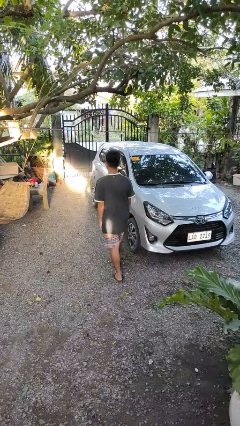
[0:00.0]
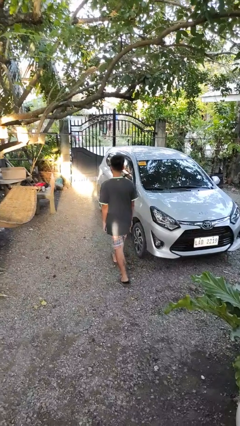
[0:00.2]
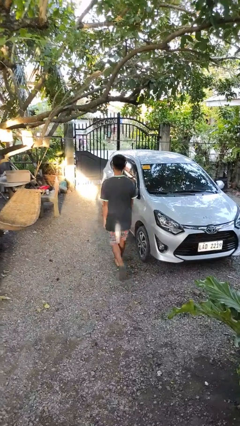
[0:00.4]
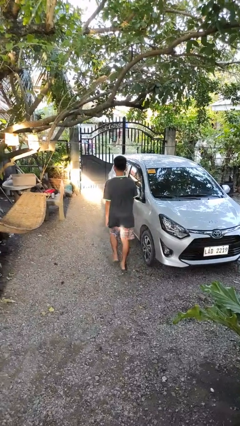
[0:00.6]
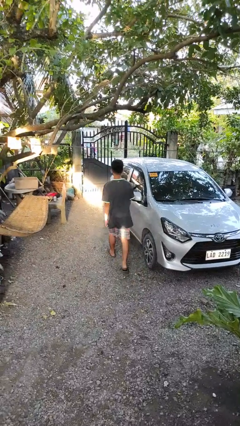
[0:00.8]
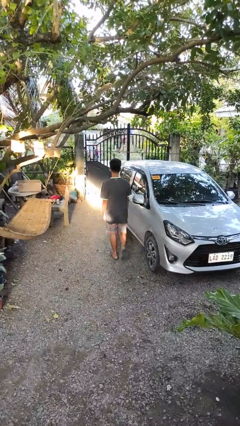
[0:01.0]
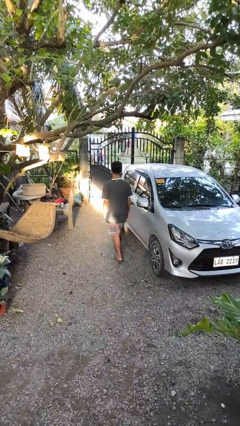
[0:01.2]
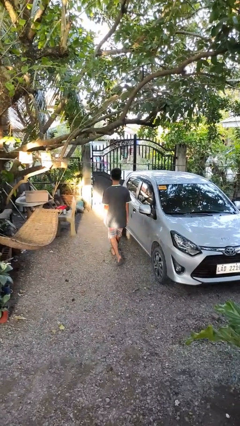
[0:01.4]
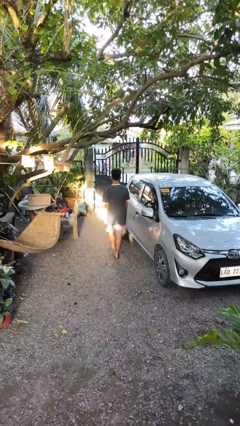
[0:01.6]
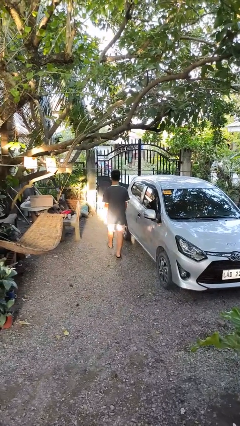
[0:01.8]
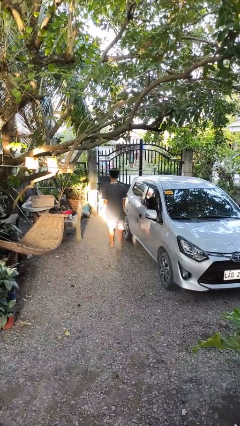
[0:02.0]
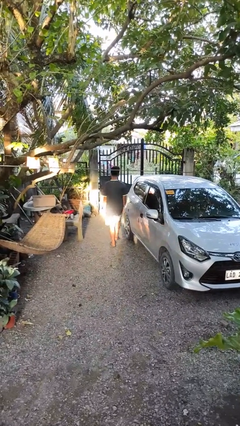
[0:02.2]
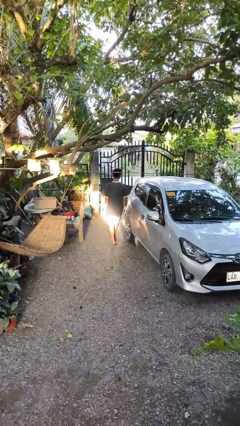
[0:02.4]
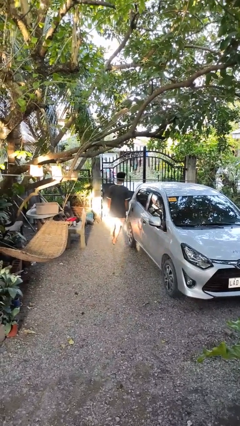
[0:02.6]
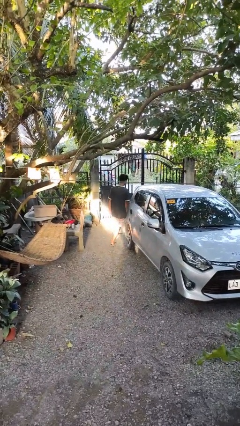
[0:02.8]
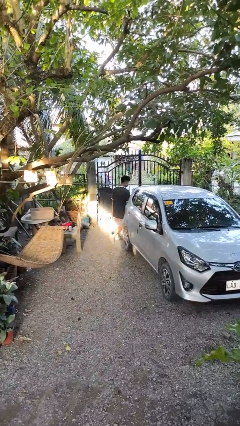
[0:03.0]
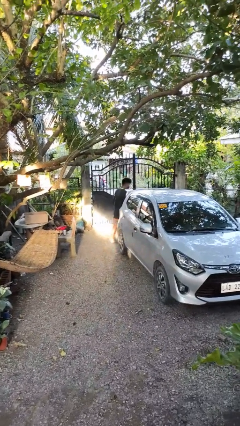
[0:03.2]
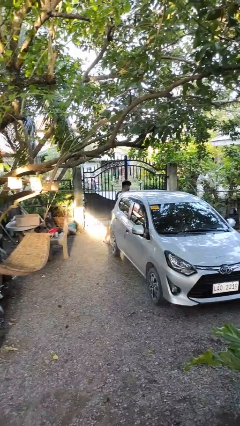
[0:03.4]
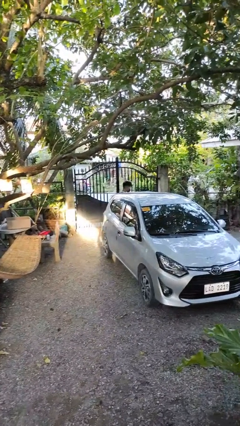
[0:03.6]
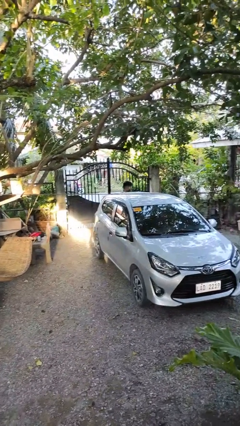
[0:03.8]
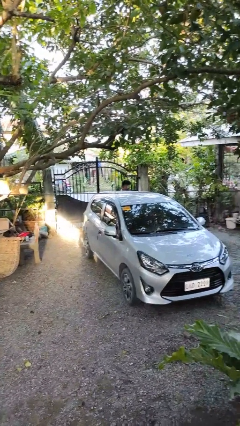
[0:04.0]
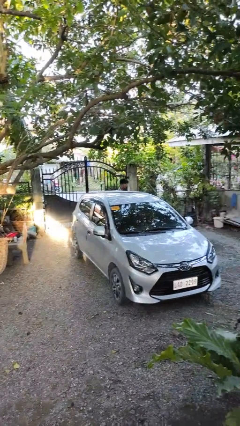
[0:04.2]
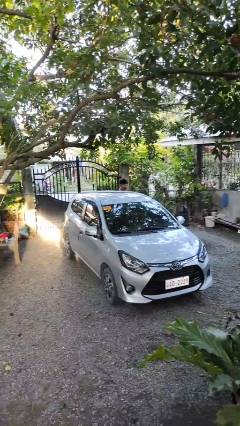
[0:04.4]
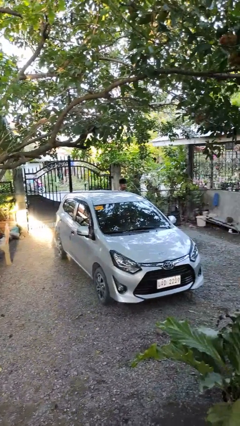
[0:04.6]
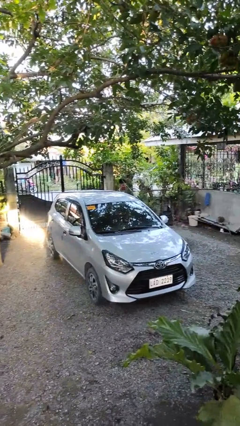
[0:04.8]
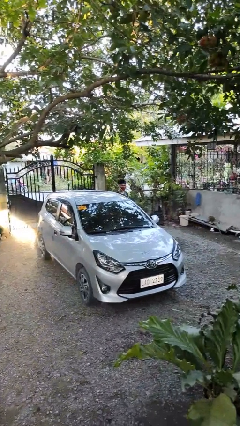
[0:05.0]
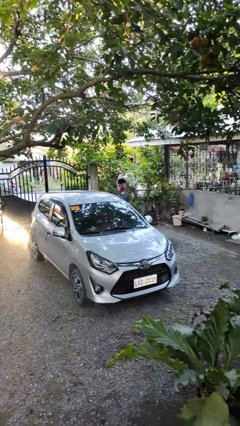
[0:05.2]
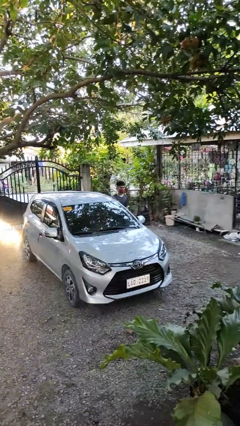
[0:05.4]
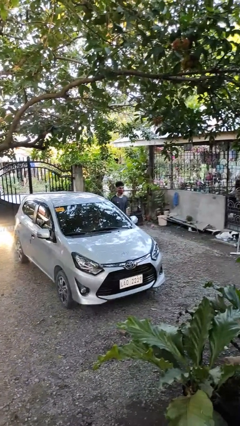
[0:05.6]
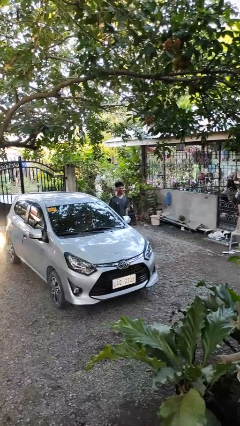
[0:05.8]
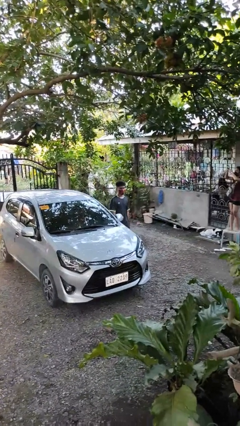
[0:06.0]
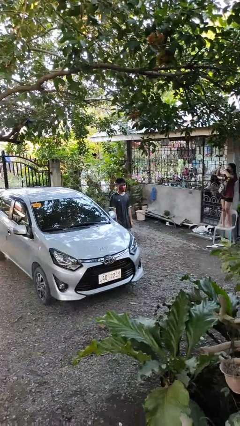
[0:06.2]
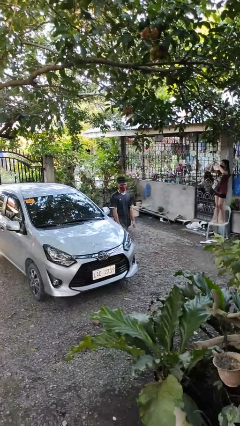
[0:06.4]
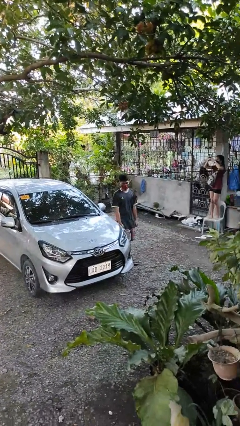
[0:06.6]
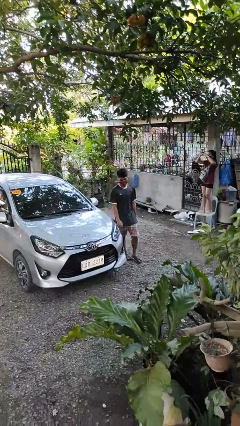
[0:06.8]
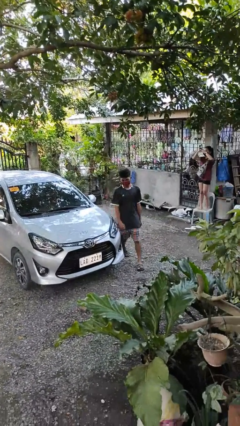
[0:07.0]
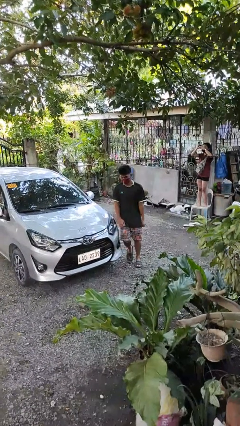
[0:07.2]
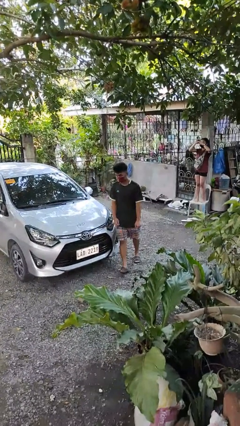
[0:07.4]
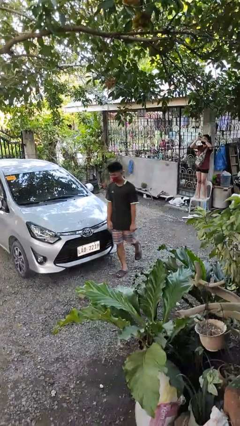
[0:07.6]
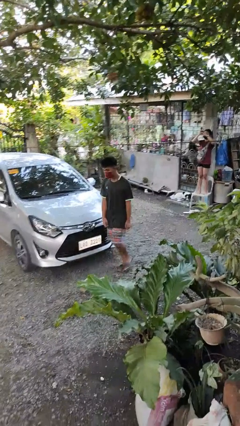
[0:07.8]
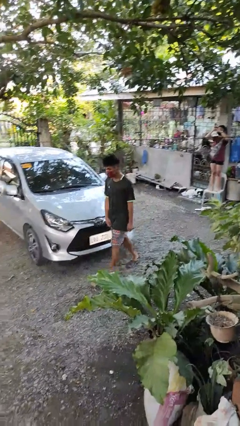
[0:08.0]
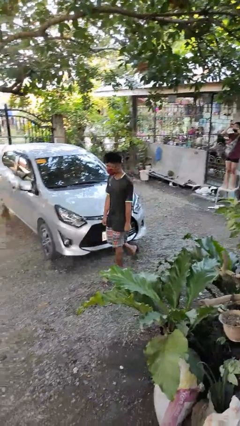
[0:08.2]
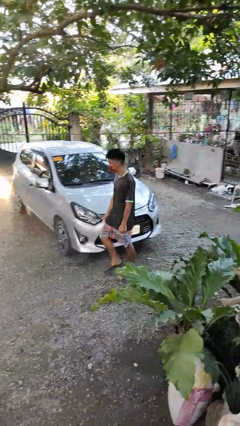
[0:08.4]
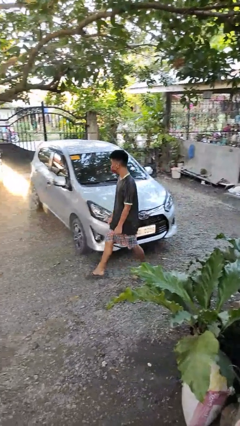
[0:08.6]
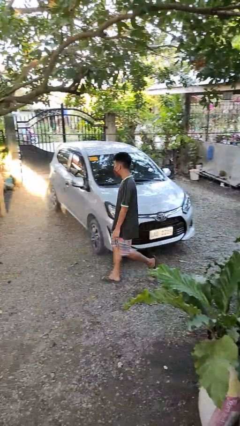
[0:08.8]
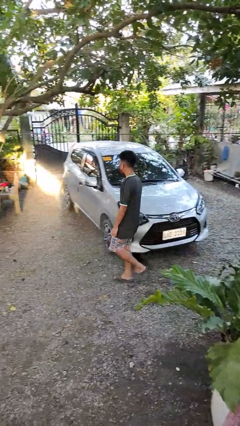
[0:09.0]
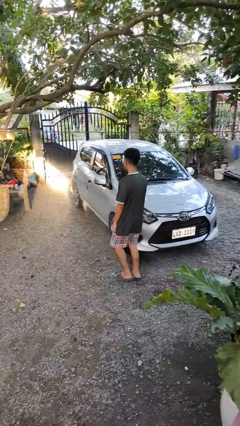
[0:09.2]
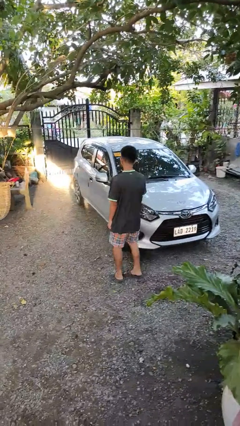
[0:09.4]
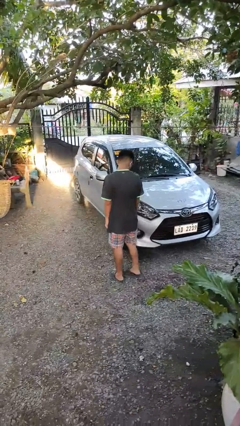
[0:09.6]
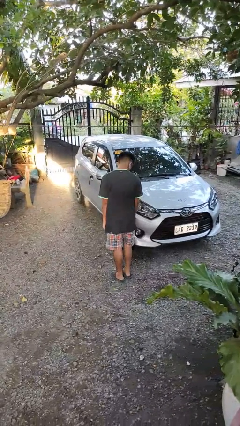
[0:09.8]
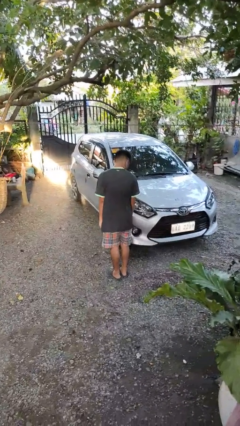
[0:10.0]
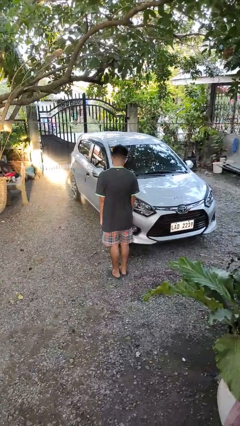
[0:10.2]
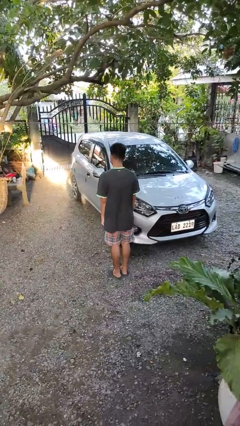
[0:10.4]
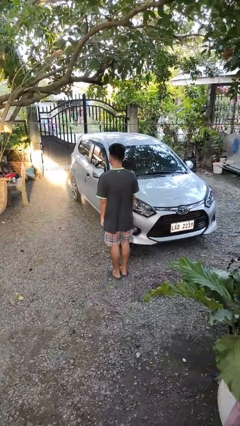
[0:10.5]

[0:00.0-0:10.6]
person walks around car

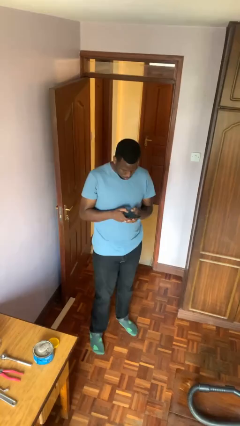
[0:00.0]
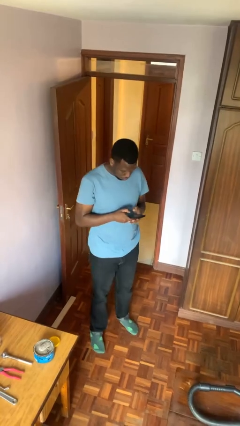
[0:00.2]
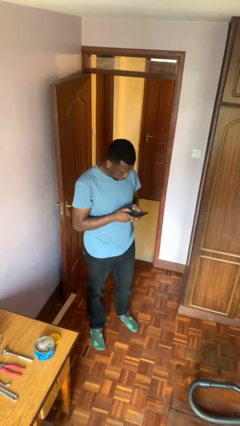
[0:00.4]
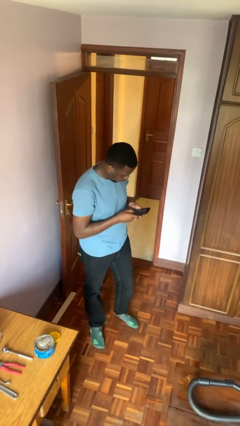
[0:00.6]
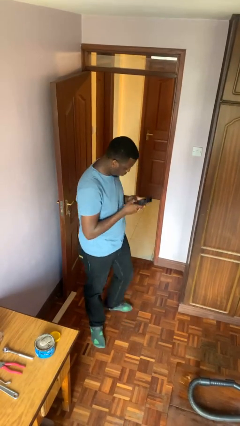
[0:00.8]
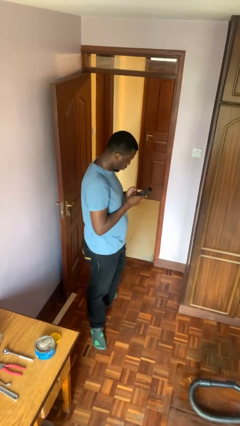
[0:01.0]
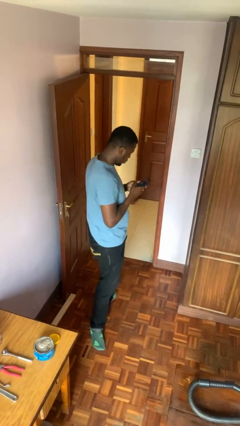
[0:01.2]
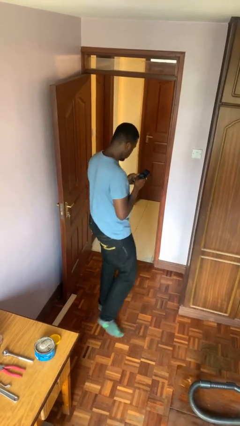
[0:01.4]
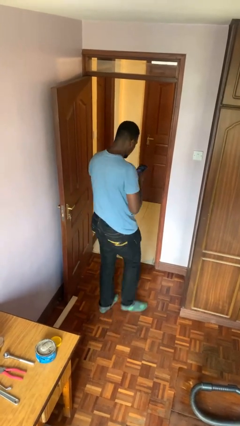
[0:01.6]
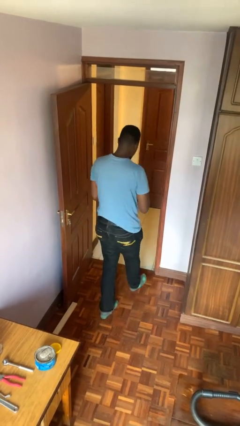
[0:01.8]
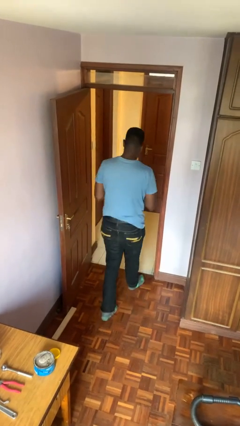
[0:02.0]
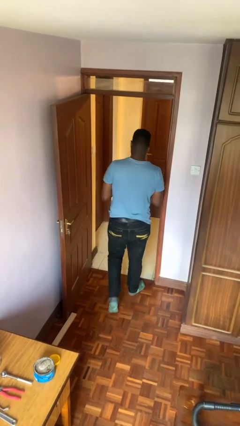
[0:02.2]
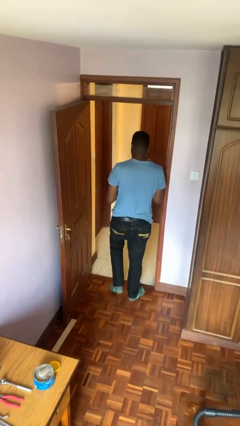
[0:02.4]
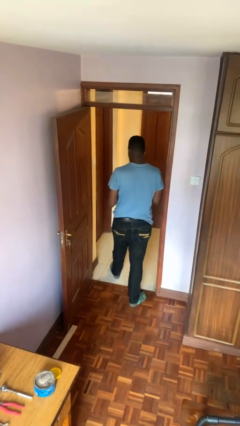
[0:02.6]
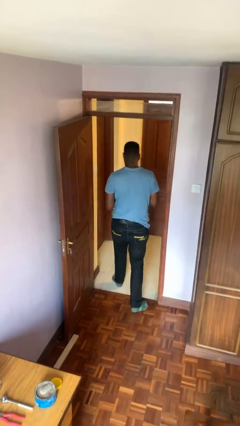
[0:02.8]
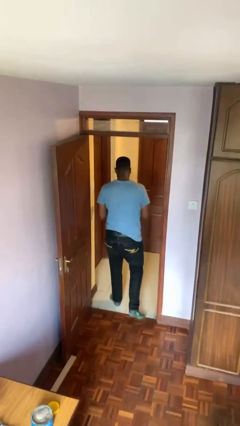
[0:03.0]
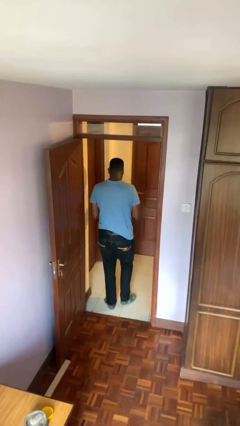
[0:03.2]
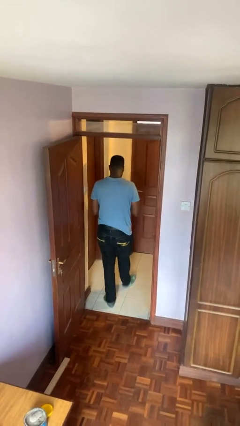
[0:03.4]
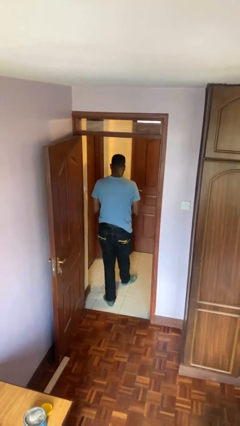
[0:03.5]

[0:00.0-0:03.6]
person exits scene through structure

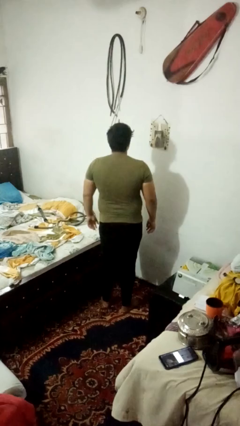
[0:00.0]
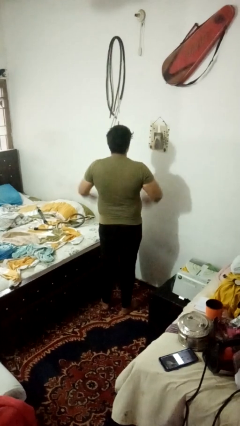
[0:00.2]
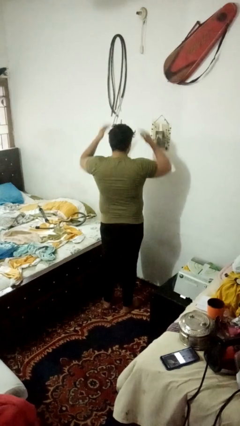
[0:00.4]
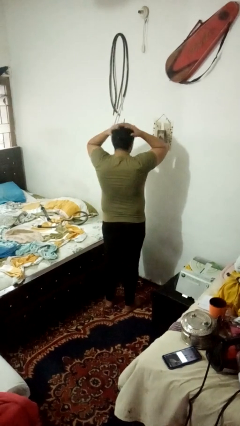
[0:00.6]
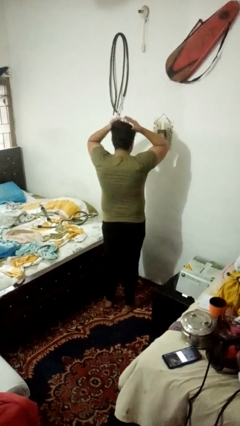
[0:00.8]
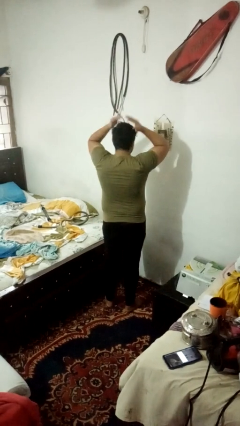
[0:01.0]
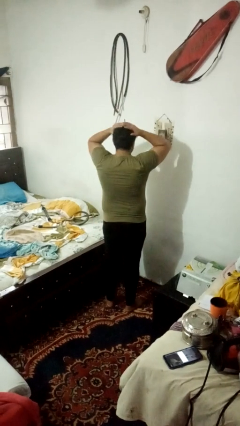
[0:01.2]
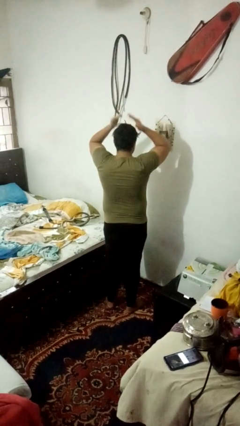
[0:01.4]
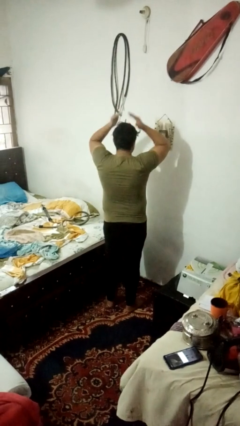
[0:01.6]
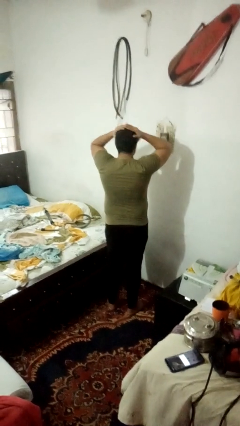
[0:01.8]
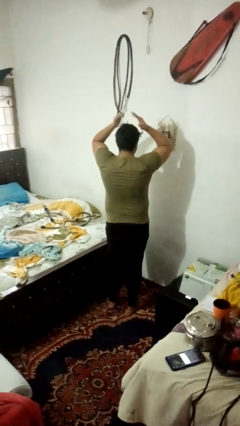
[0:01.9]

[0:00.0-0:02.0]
person pats head

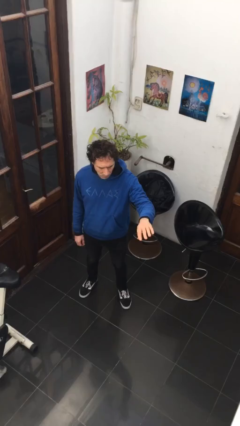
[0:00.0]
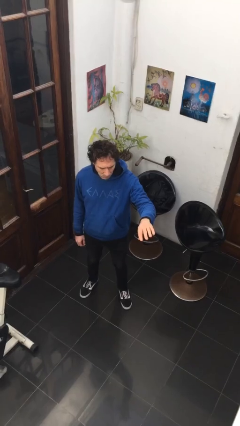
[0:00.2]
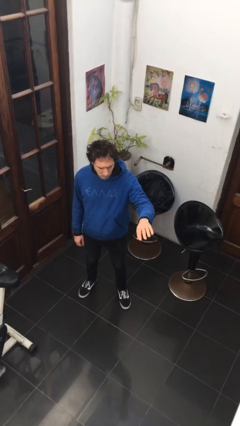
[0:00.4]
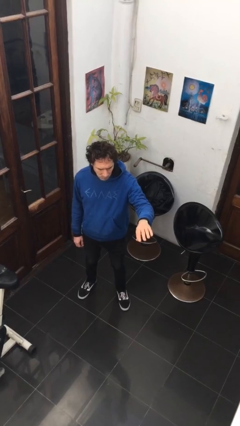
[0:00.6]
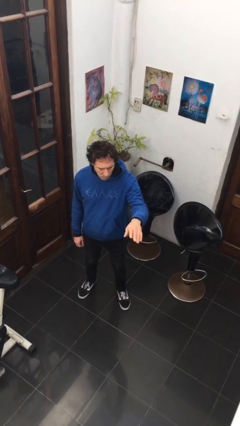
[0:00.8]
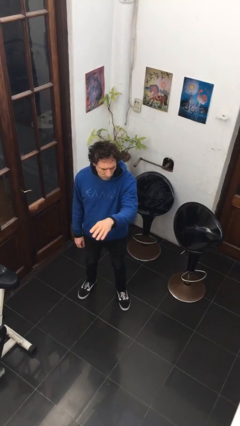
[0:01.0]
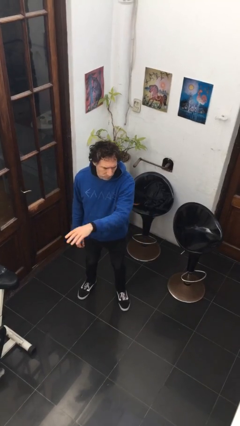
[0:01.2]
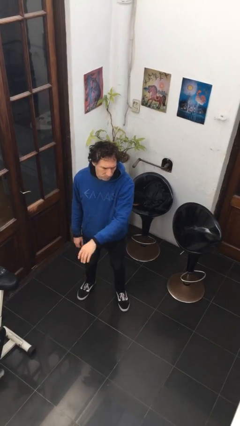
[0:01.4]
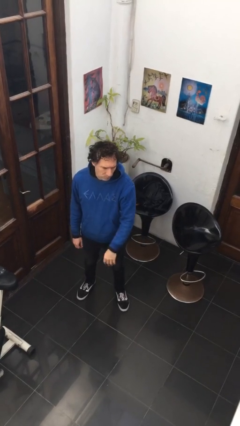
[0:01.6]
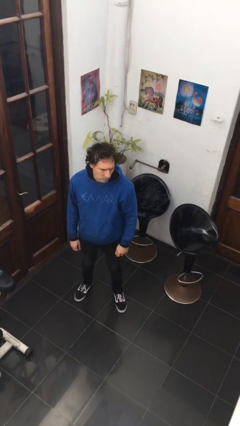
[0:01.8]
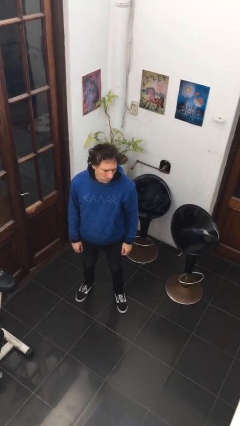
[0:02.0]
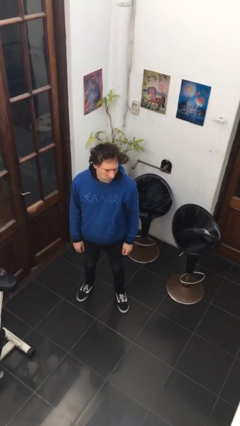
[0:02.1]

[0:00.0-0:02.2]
person gestures swipe right
